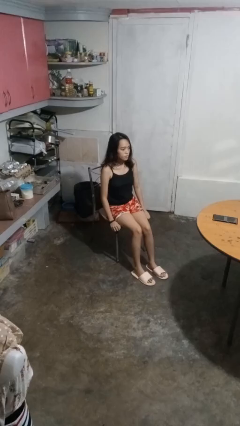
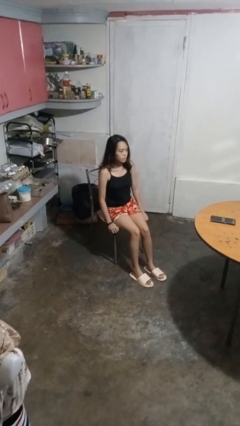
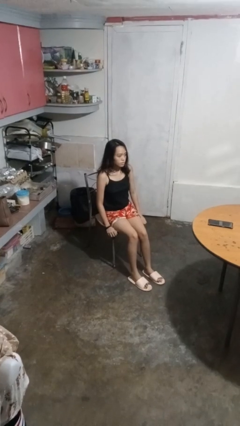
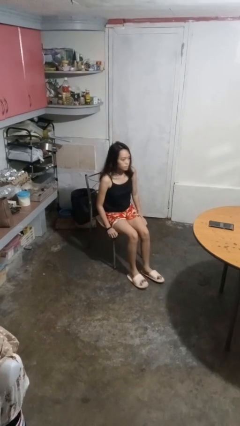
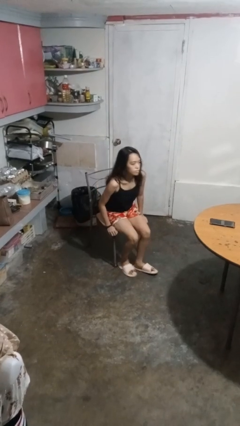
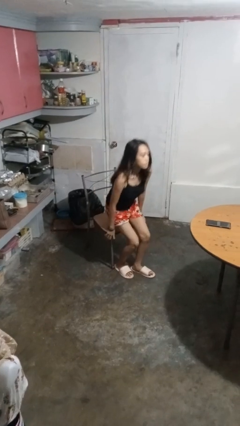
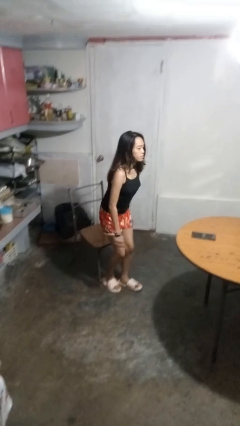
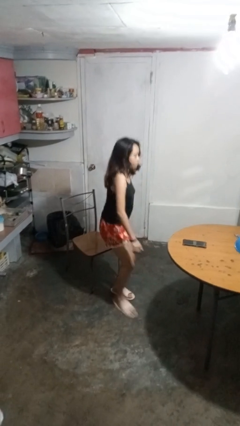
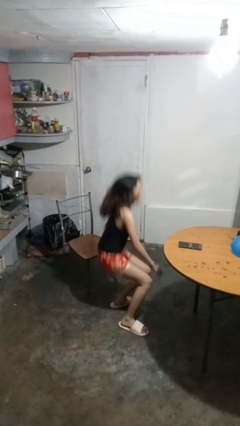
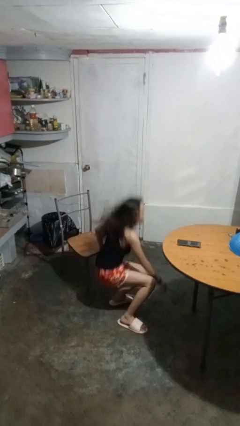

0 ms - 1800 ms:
person falls from chair

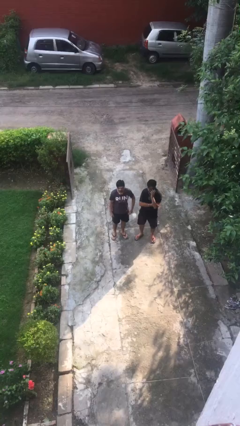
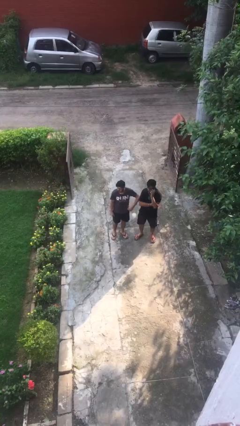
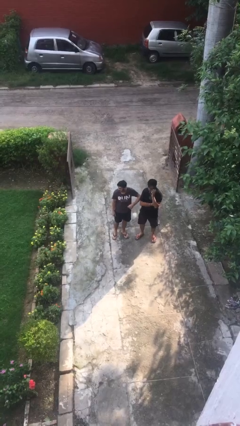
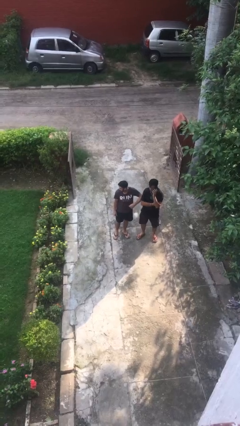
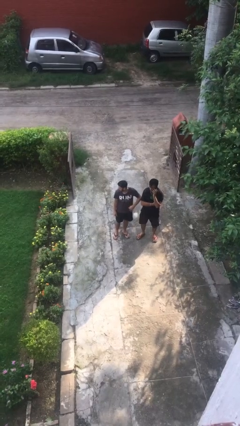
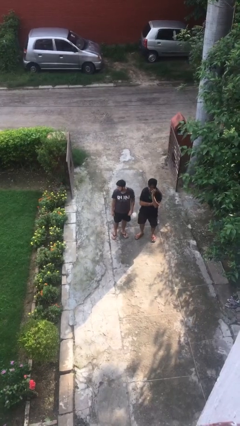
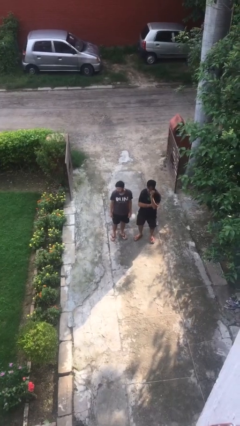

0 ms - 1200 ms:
person nudges person with elbow

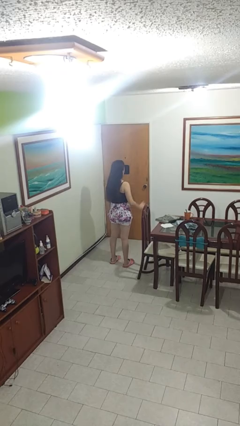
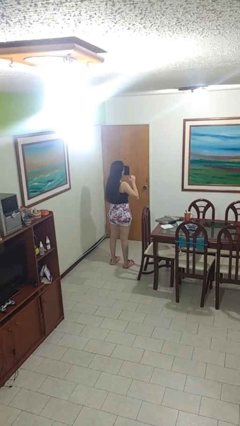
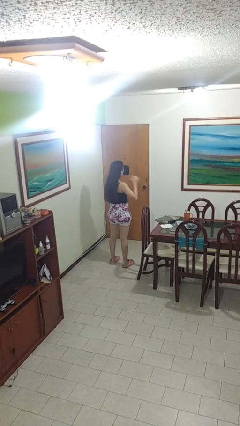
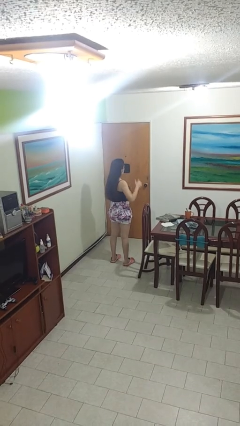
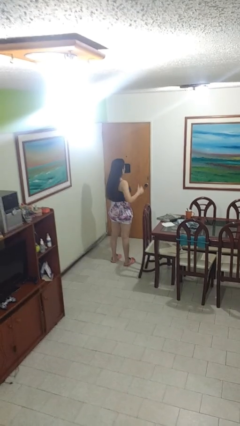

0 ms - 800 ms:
person gestures behind me

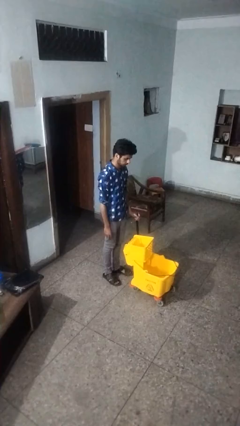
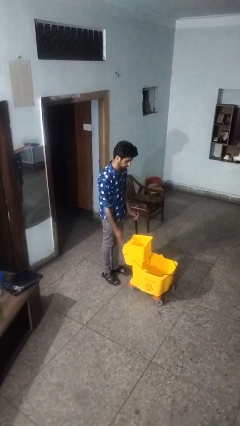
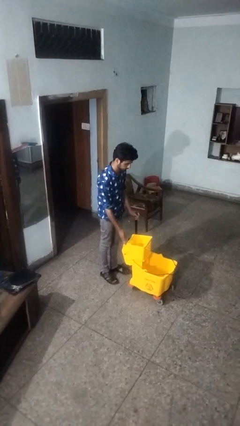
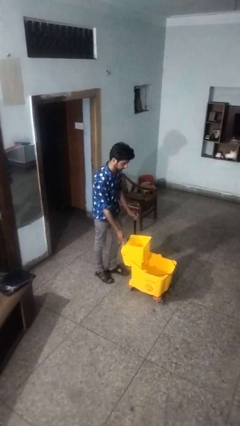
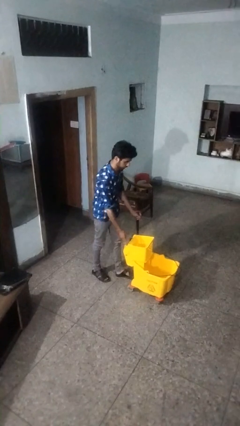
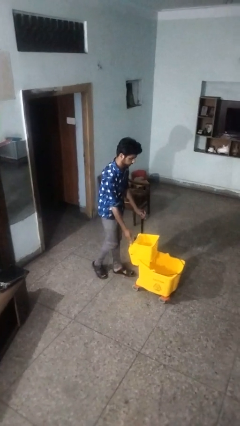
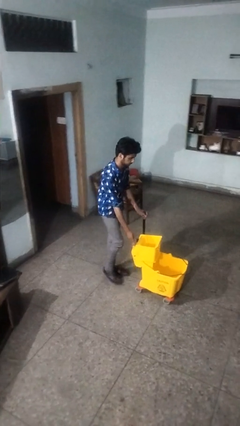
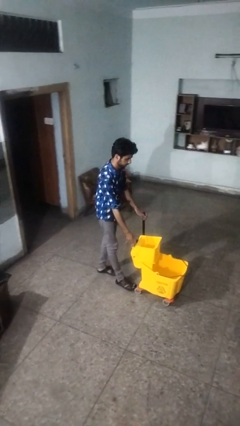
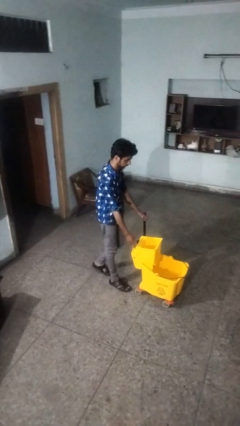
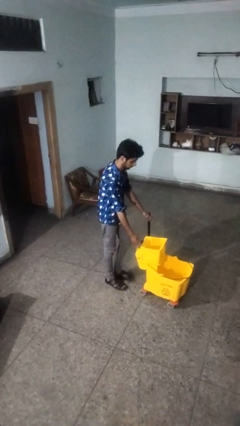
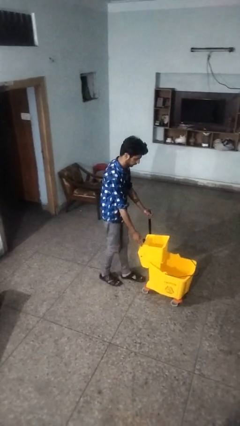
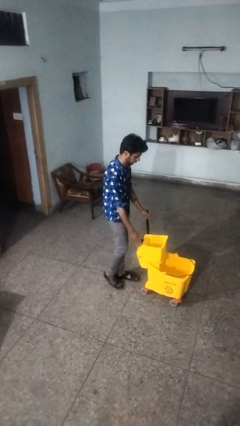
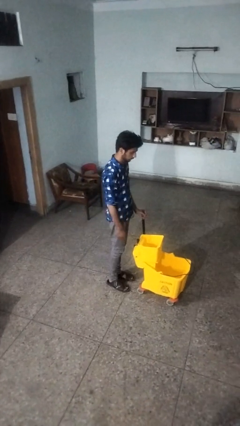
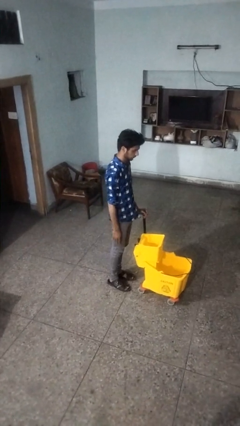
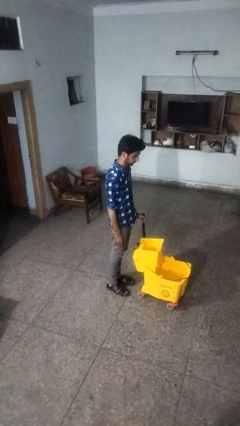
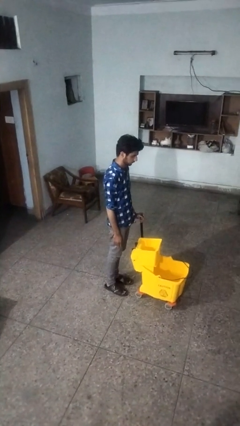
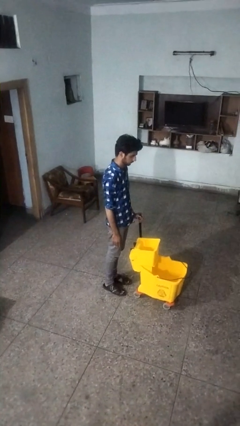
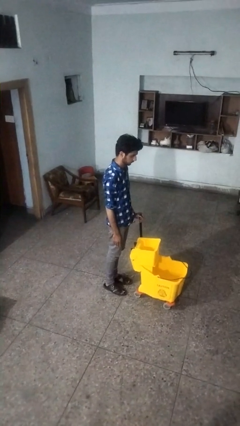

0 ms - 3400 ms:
person pushes wheeled cart

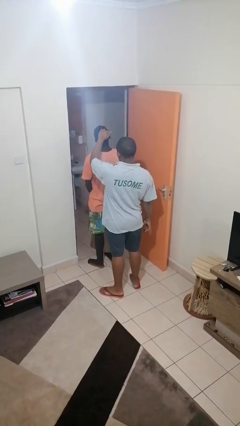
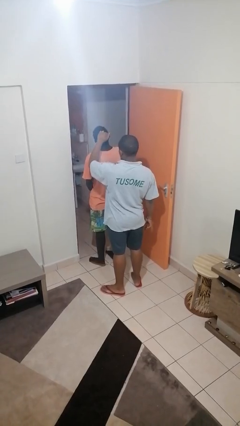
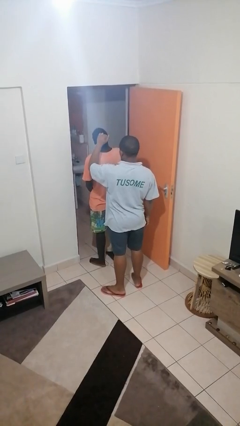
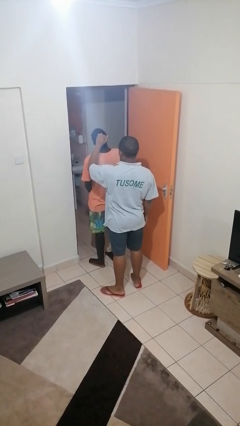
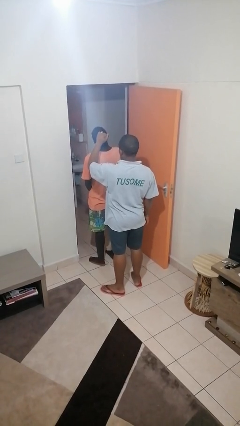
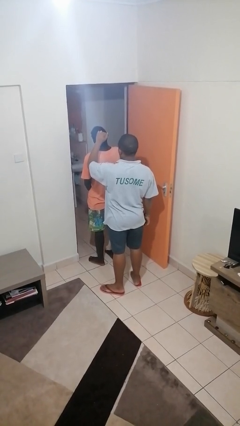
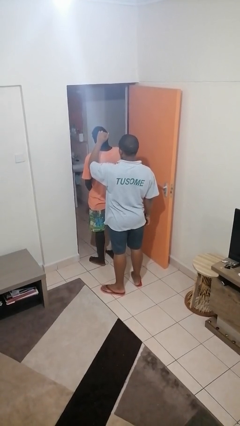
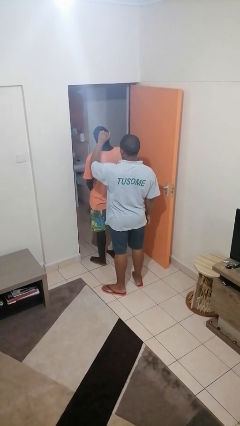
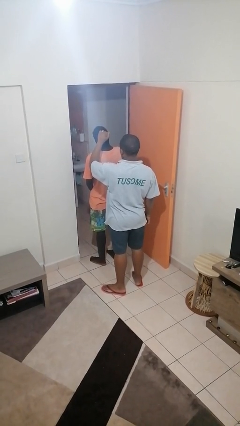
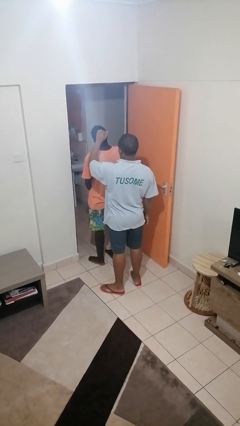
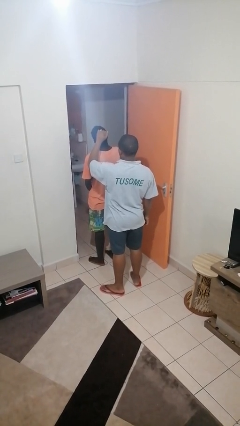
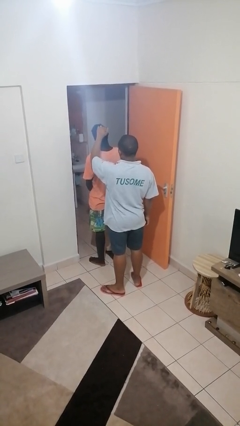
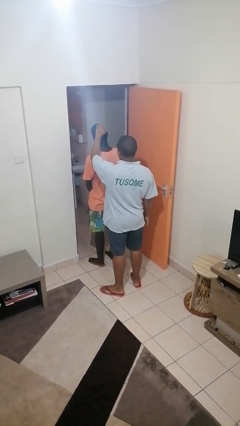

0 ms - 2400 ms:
person grabs person by hair

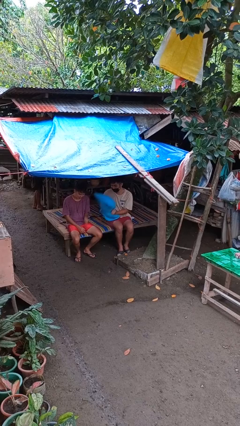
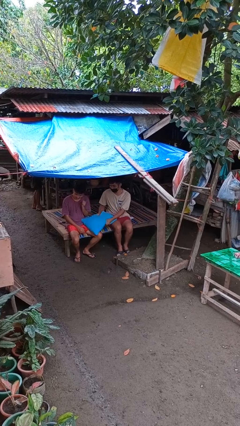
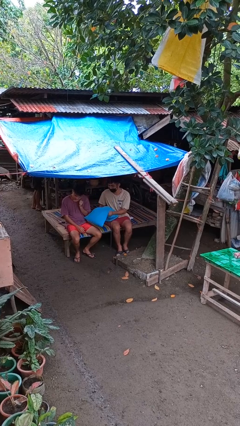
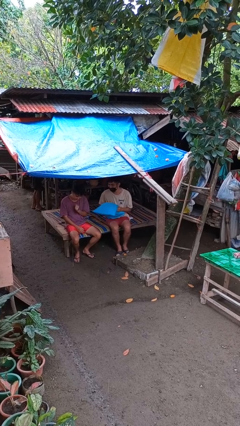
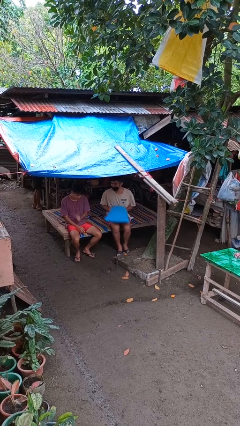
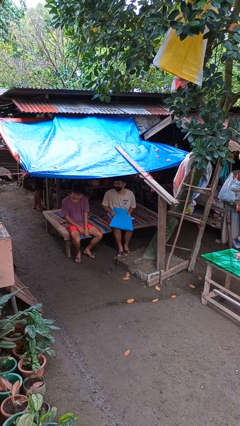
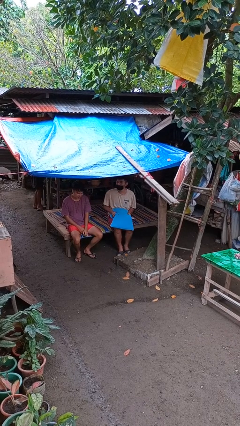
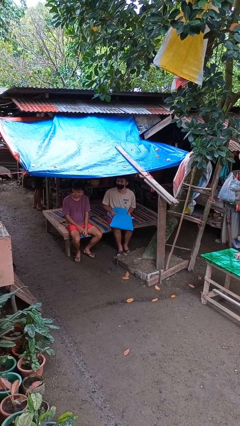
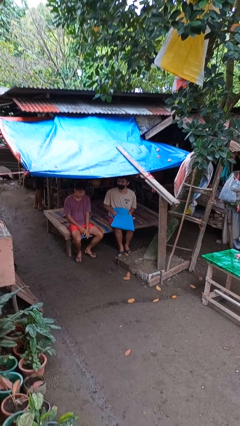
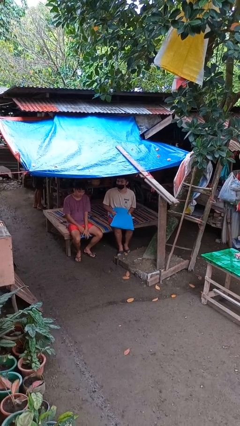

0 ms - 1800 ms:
person hits person with pillow

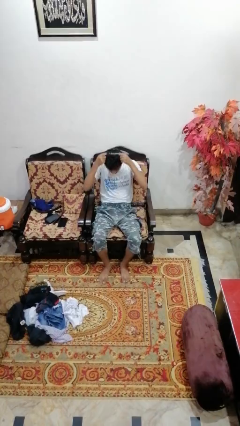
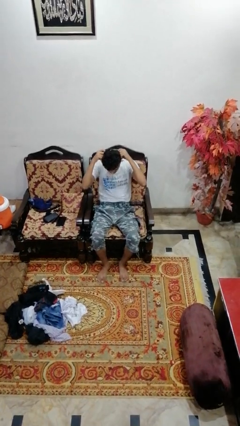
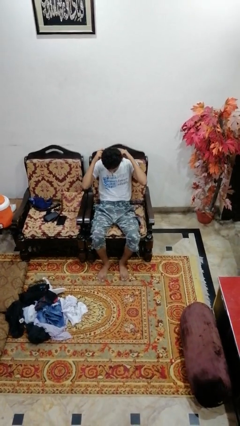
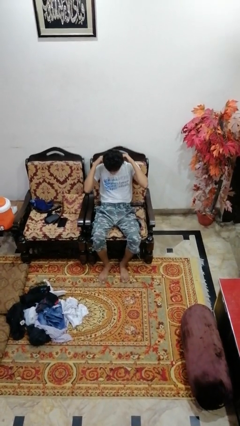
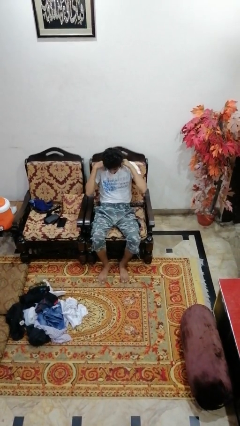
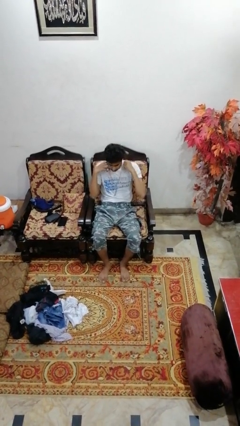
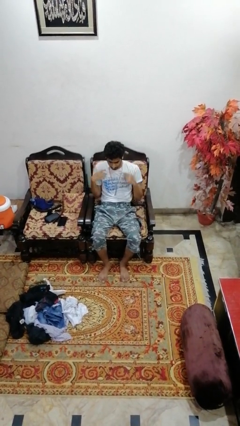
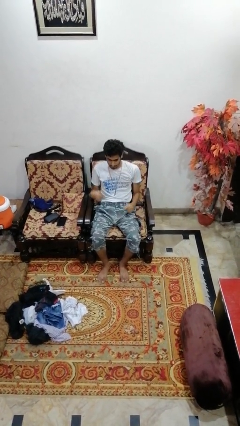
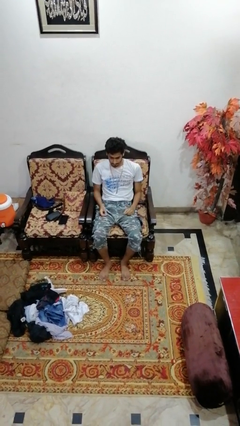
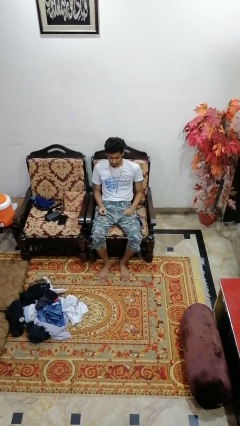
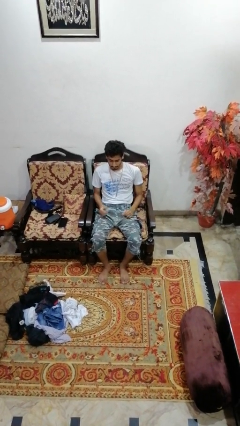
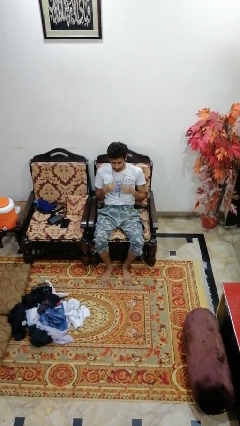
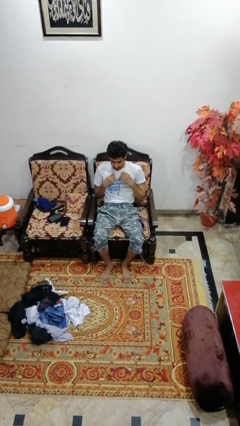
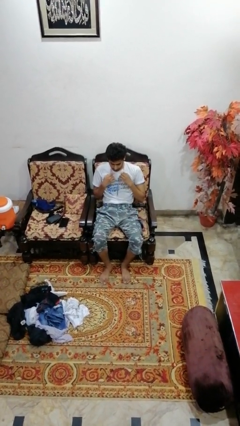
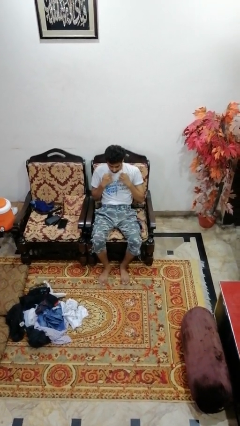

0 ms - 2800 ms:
person puts on necklace

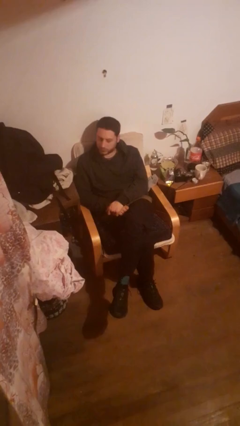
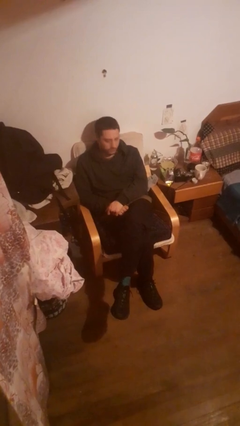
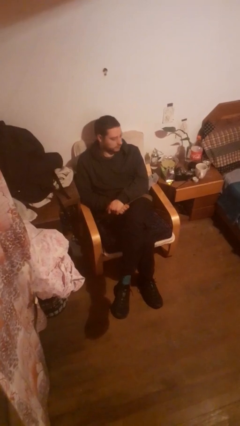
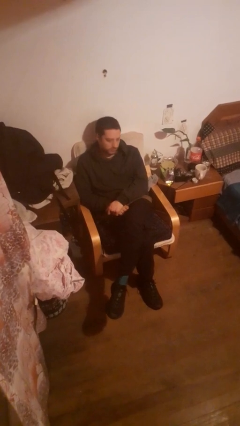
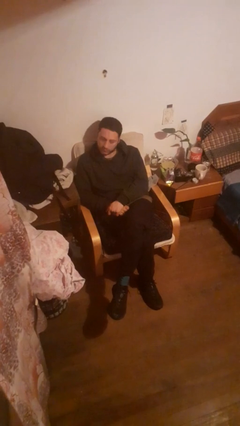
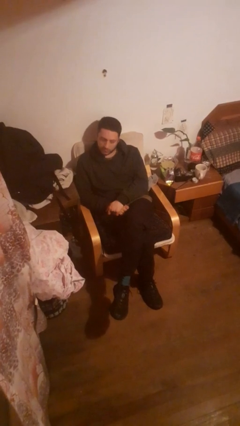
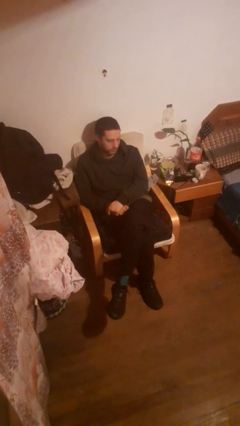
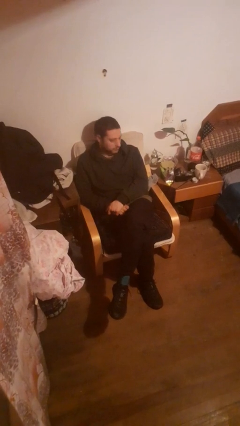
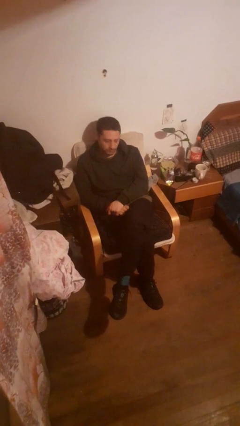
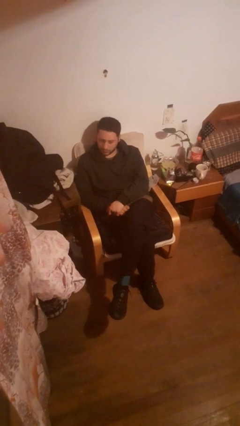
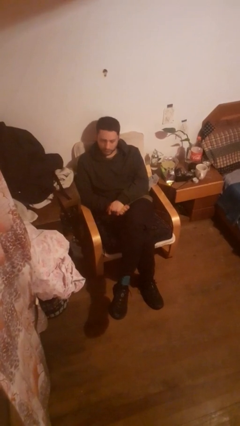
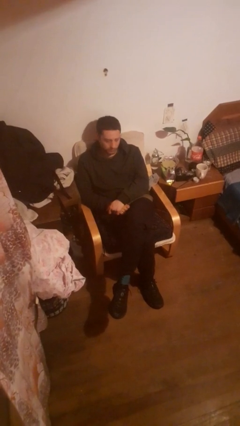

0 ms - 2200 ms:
person shakes head

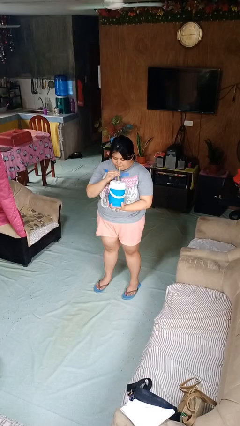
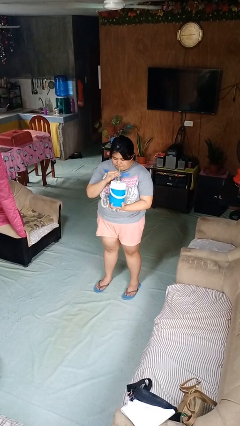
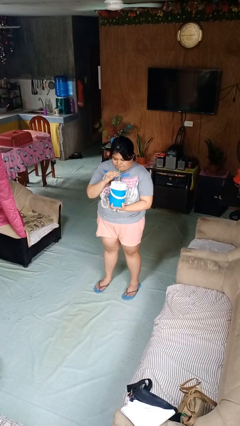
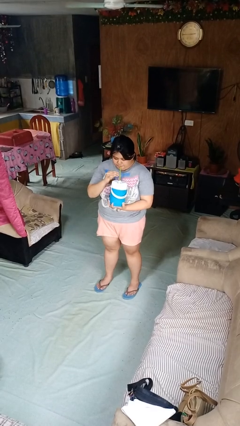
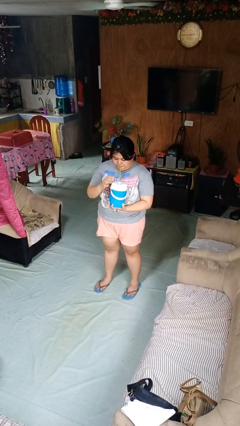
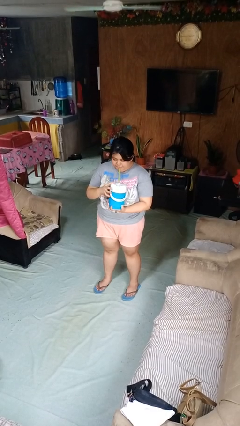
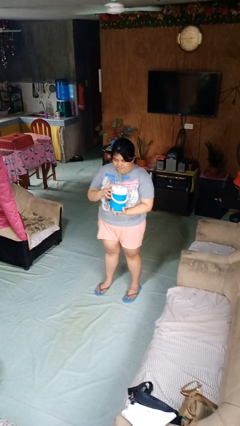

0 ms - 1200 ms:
person drinks from straw
